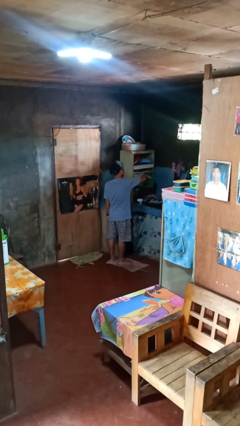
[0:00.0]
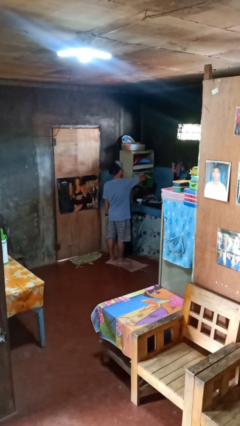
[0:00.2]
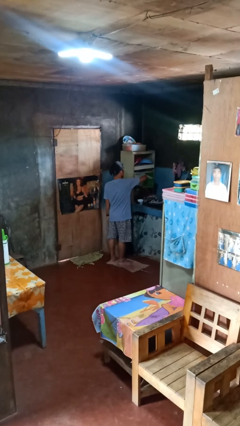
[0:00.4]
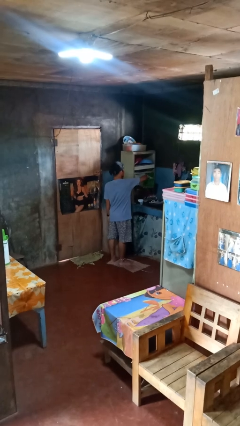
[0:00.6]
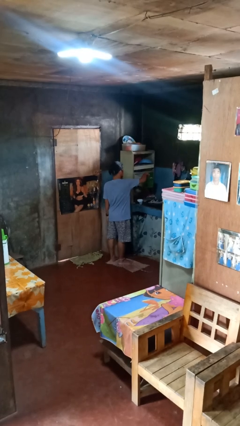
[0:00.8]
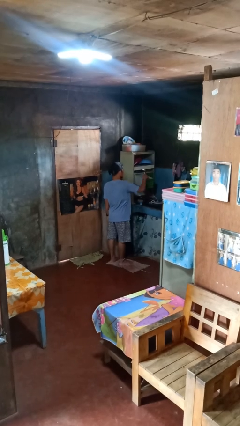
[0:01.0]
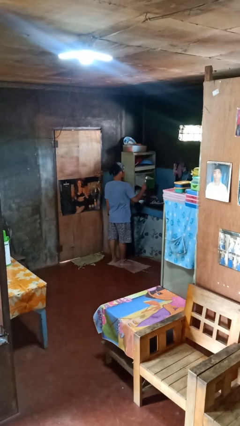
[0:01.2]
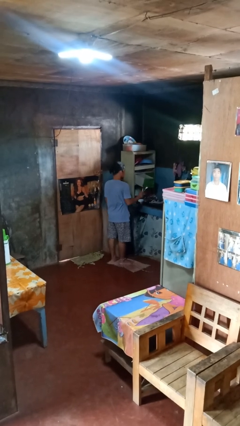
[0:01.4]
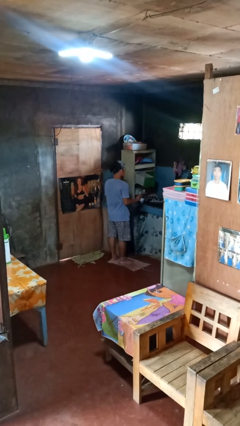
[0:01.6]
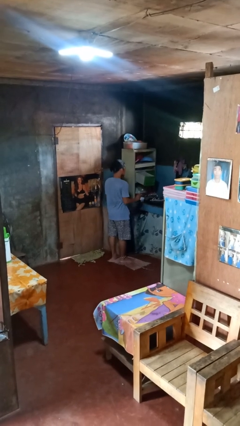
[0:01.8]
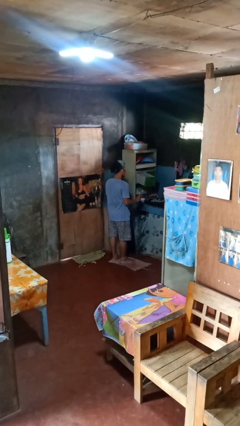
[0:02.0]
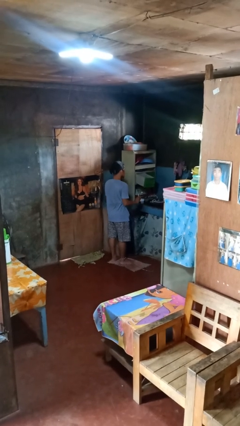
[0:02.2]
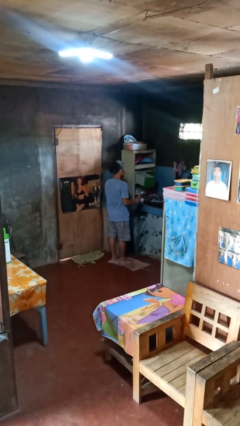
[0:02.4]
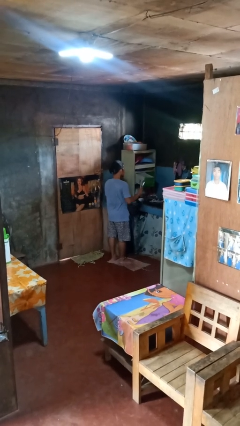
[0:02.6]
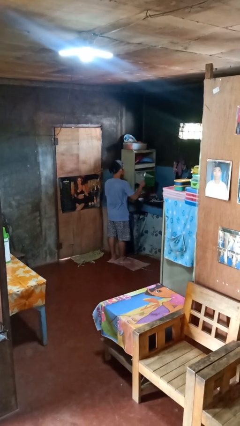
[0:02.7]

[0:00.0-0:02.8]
person takes object from kitchen drawer

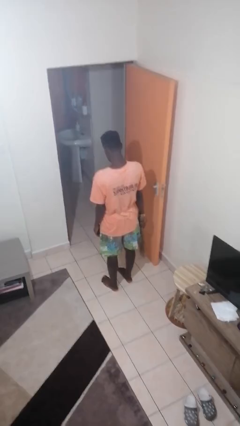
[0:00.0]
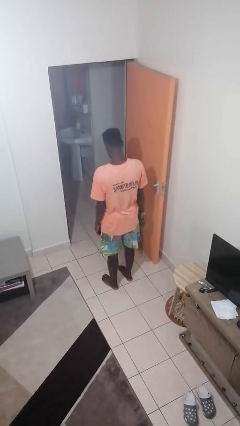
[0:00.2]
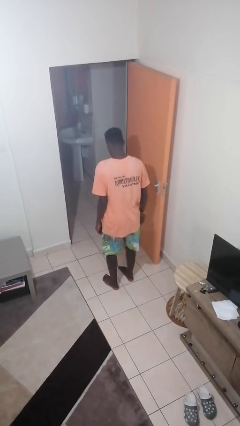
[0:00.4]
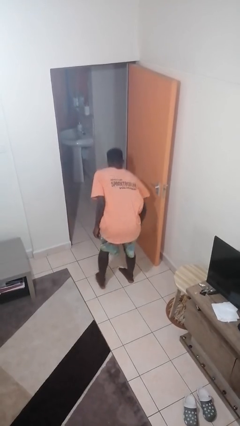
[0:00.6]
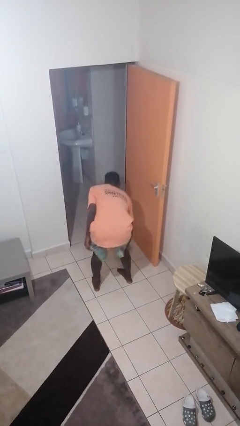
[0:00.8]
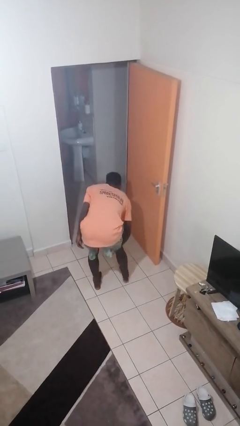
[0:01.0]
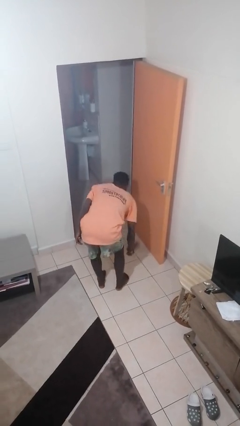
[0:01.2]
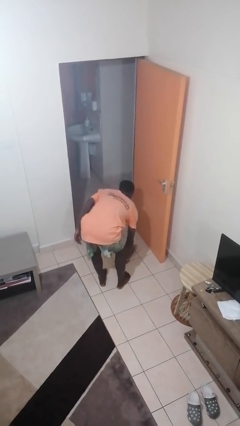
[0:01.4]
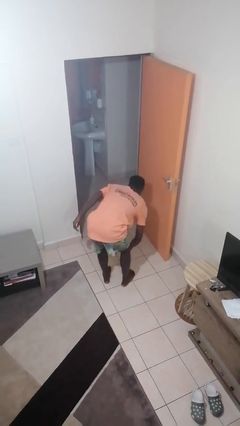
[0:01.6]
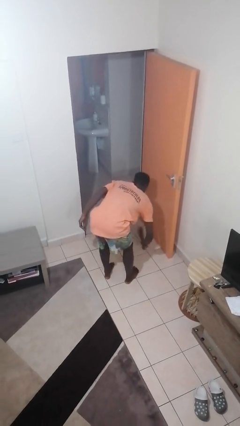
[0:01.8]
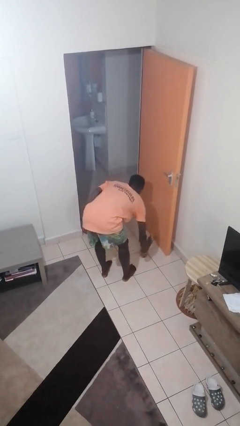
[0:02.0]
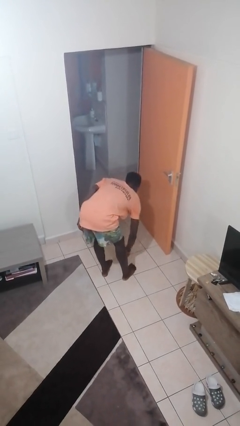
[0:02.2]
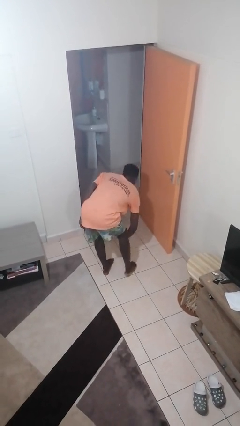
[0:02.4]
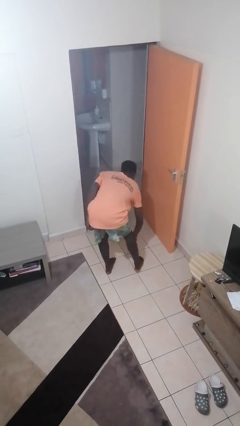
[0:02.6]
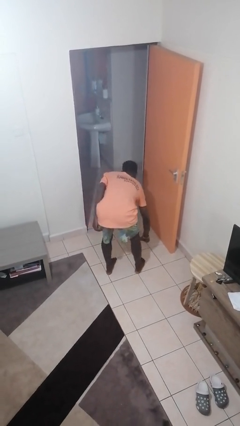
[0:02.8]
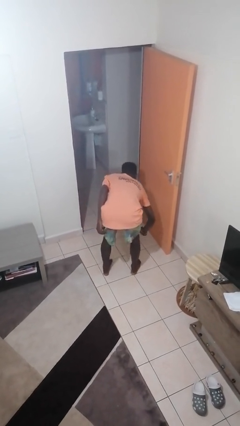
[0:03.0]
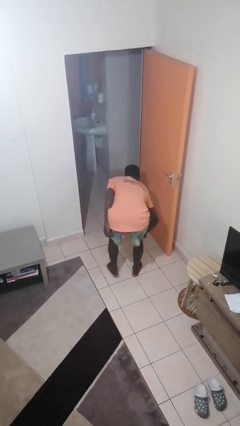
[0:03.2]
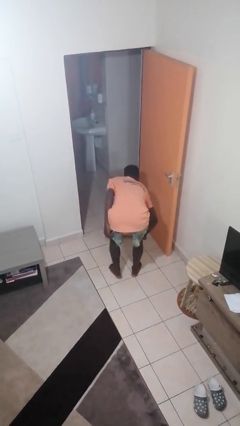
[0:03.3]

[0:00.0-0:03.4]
person sweeps floor

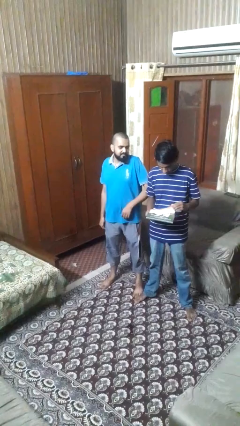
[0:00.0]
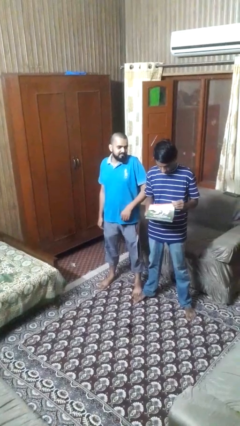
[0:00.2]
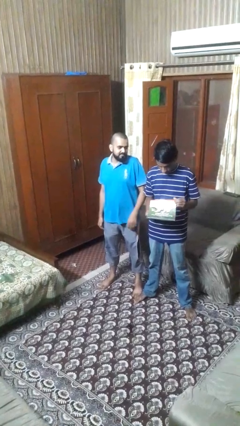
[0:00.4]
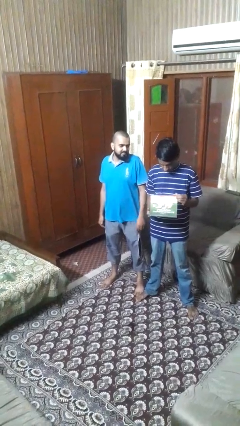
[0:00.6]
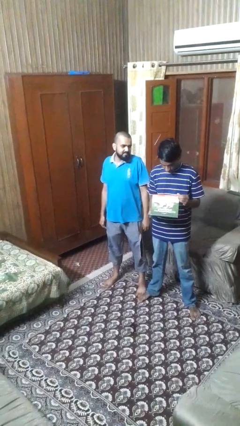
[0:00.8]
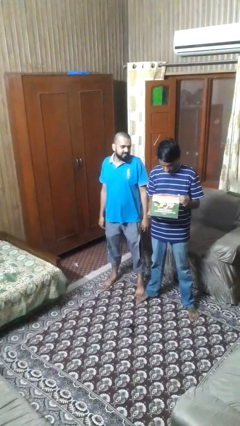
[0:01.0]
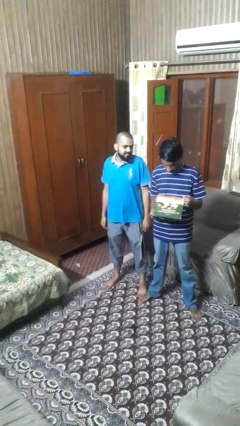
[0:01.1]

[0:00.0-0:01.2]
person nudges person with elbow

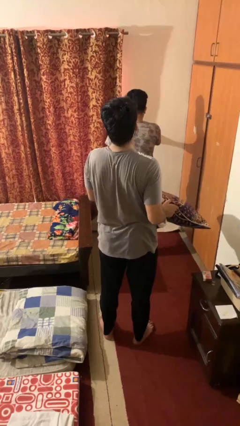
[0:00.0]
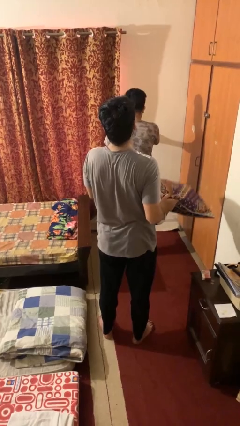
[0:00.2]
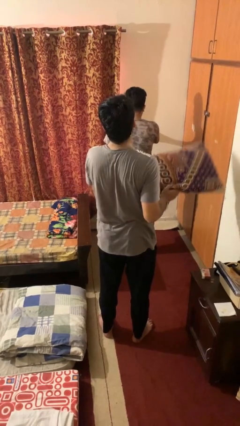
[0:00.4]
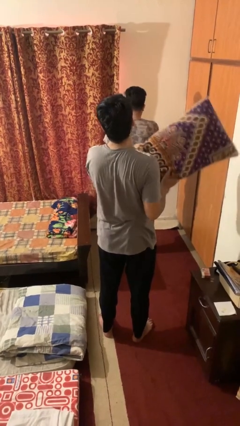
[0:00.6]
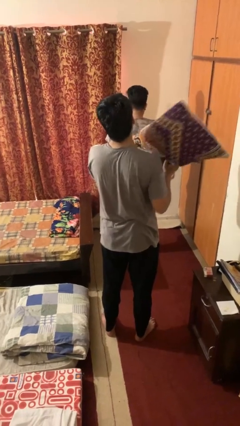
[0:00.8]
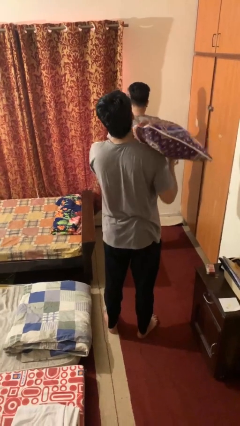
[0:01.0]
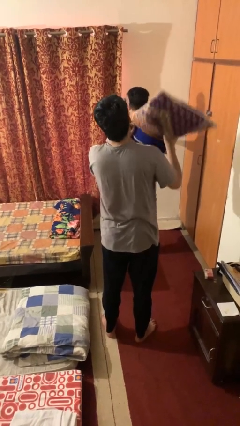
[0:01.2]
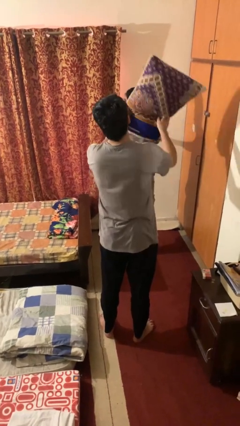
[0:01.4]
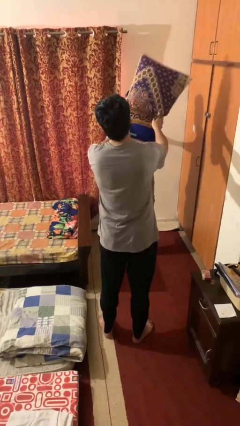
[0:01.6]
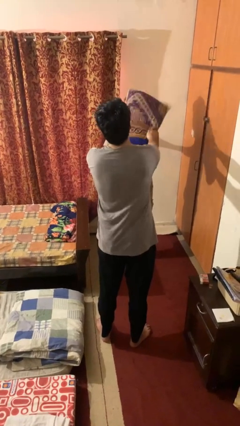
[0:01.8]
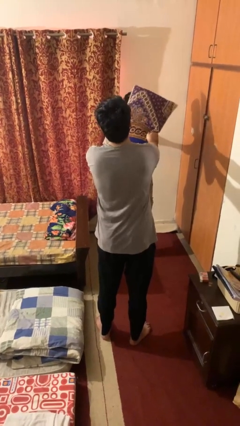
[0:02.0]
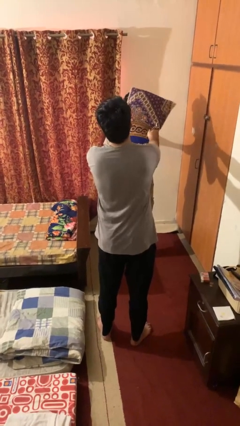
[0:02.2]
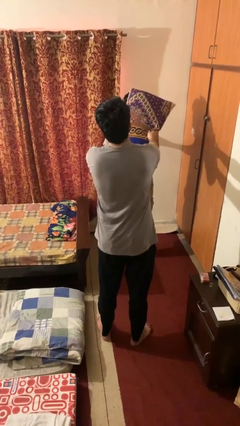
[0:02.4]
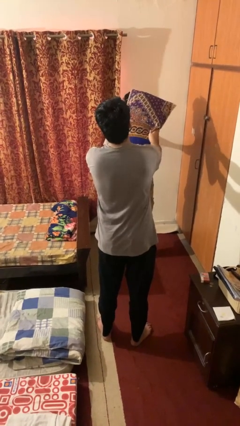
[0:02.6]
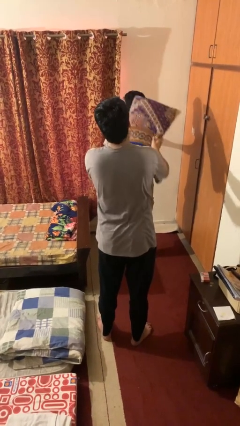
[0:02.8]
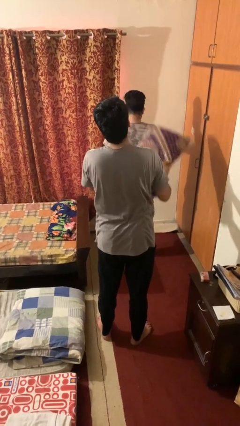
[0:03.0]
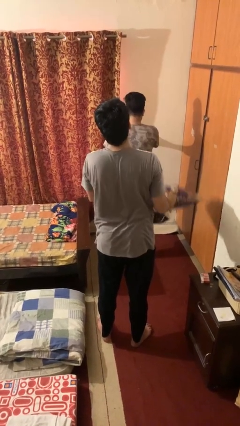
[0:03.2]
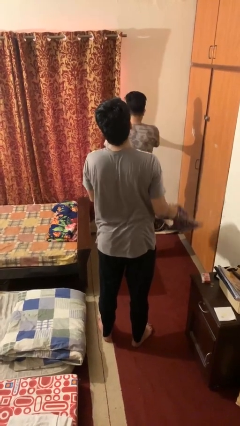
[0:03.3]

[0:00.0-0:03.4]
person hits person with pillow

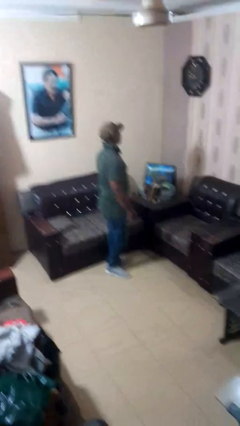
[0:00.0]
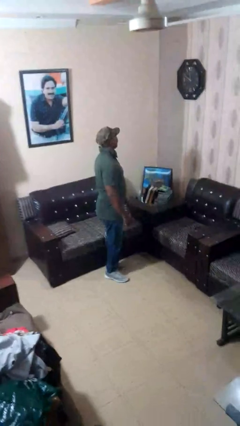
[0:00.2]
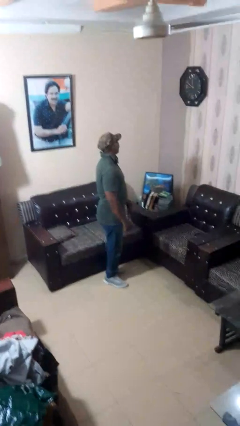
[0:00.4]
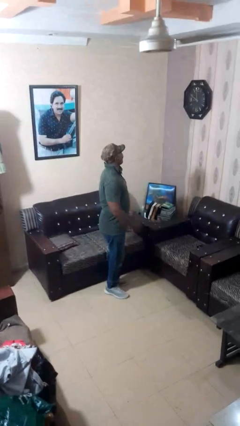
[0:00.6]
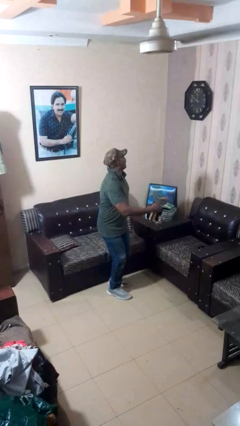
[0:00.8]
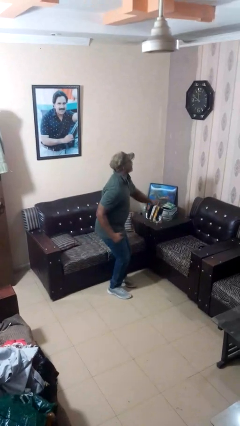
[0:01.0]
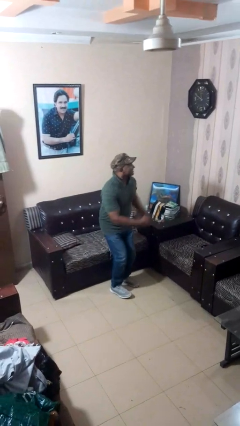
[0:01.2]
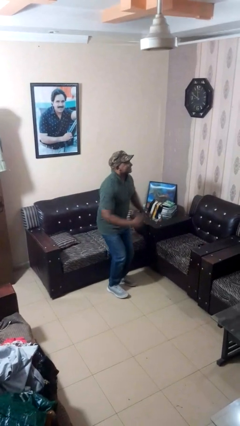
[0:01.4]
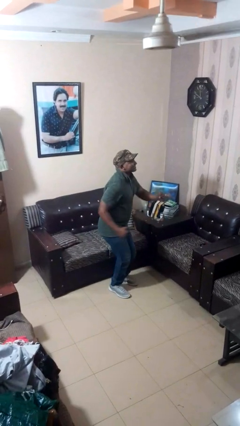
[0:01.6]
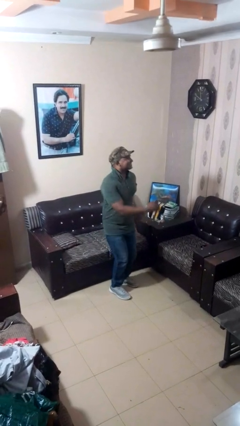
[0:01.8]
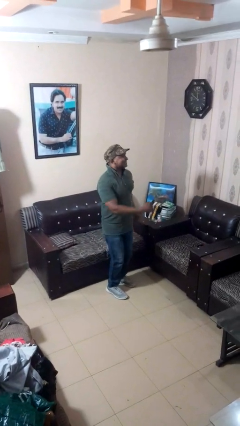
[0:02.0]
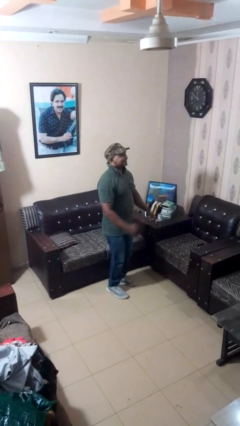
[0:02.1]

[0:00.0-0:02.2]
person wiggles hips

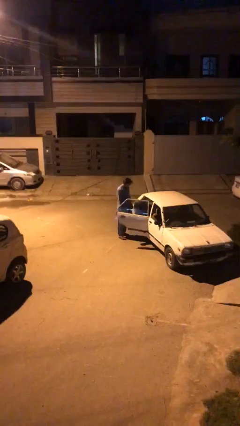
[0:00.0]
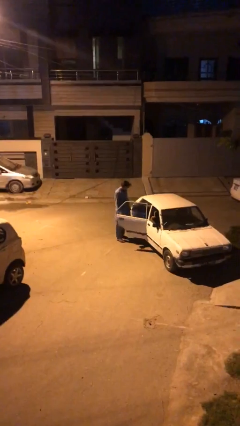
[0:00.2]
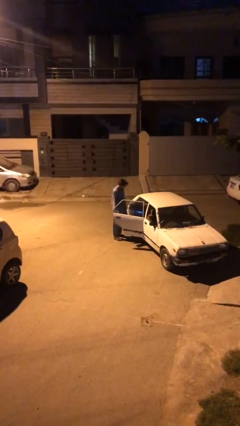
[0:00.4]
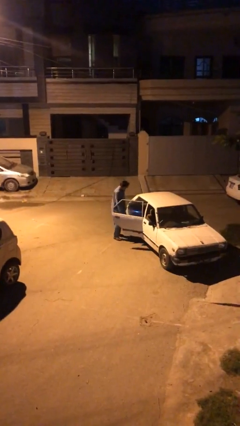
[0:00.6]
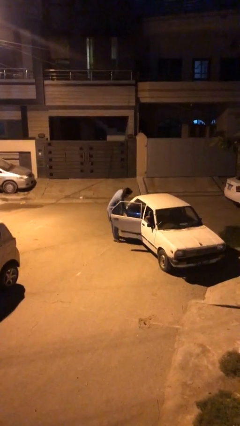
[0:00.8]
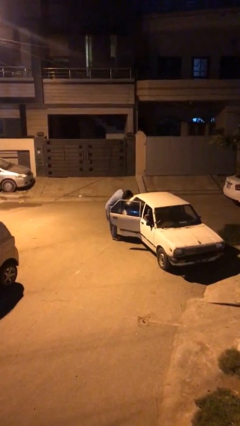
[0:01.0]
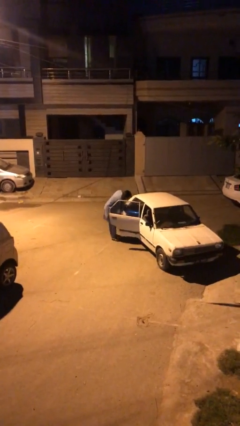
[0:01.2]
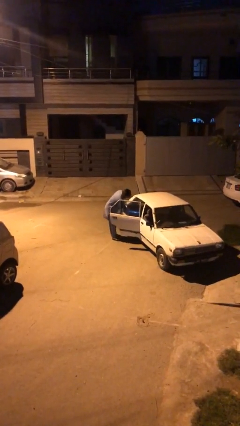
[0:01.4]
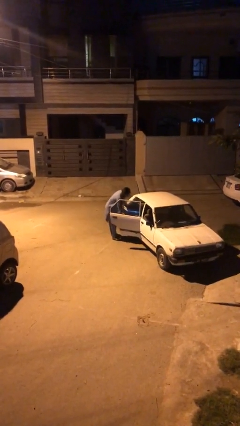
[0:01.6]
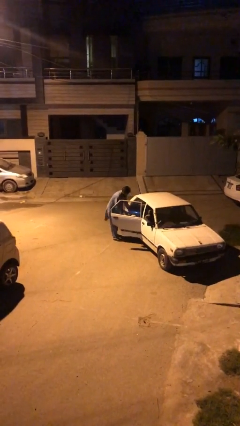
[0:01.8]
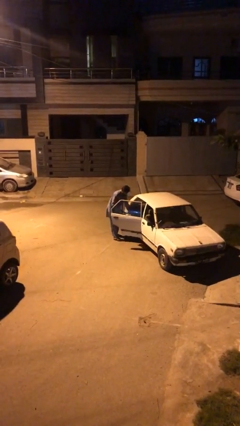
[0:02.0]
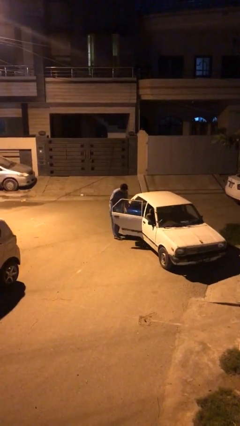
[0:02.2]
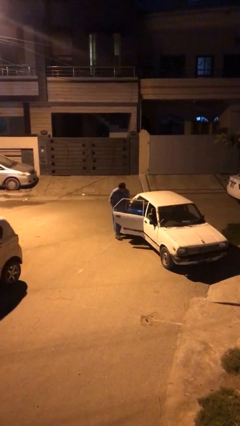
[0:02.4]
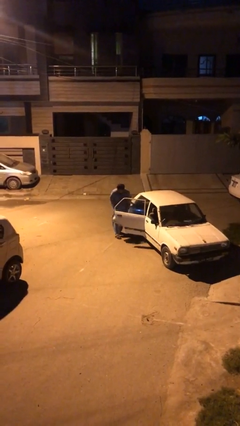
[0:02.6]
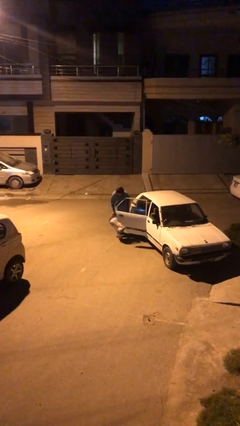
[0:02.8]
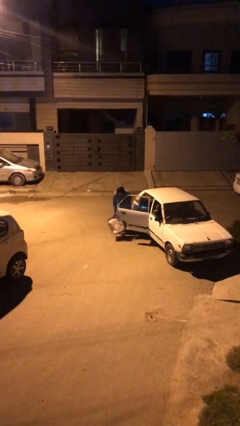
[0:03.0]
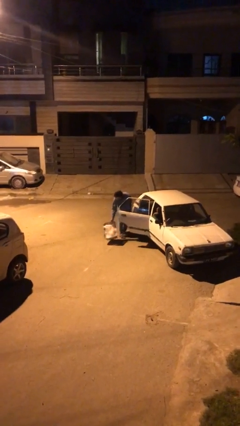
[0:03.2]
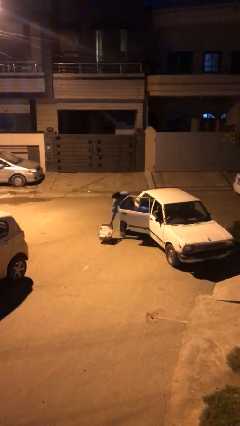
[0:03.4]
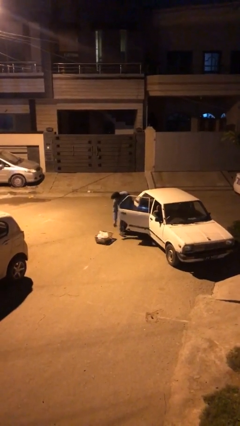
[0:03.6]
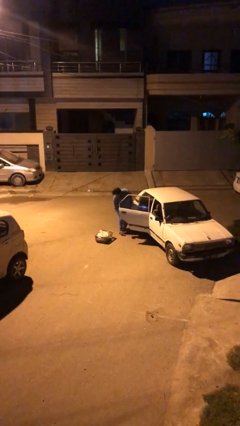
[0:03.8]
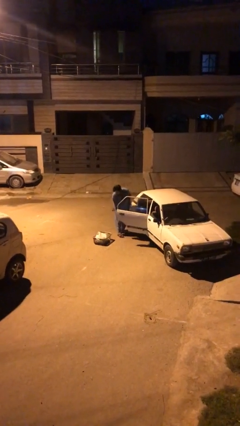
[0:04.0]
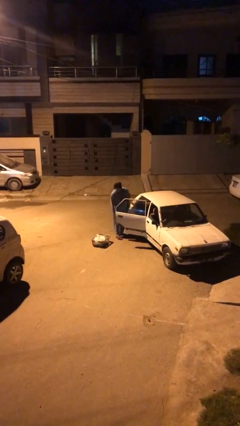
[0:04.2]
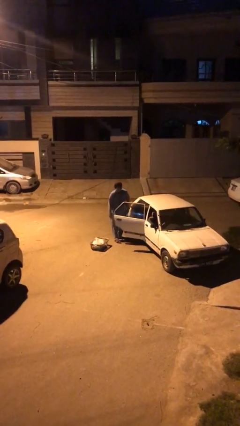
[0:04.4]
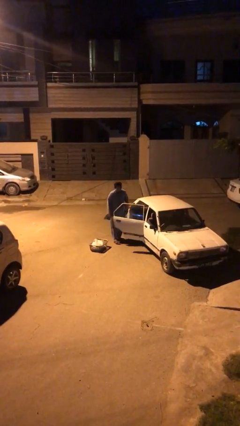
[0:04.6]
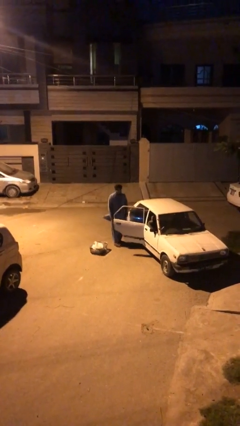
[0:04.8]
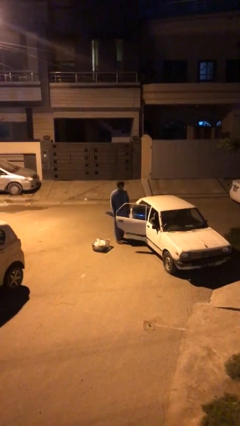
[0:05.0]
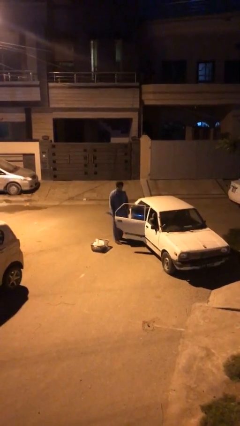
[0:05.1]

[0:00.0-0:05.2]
person unloads car
